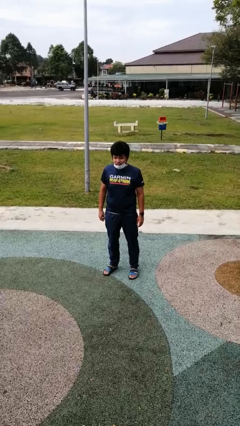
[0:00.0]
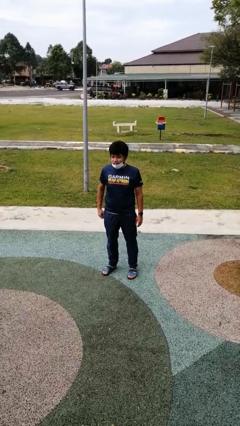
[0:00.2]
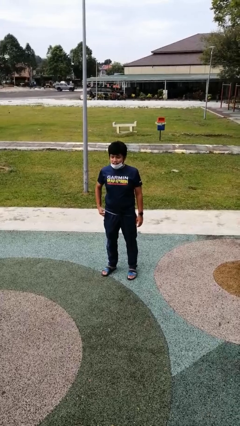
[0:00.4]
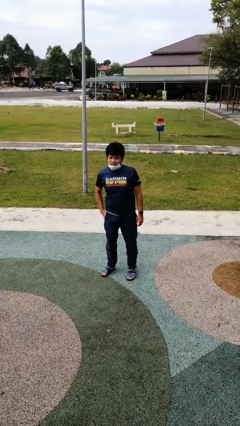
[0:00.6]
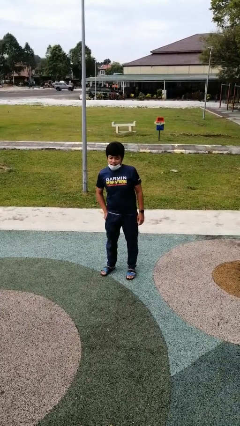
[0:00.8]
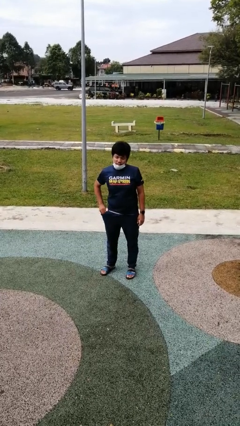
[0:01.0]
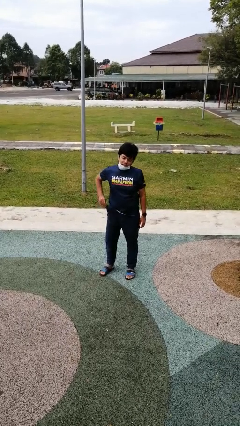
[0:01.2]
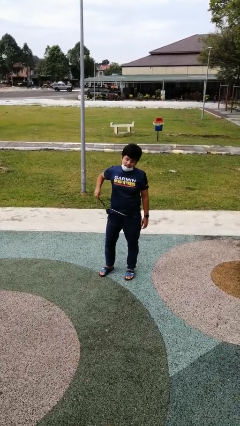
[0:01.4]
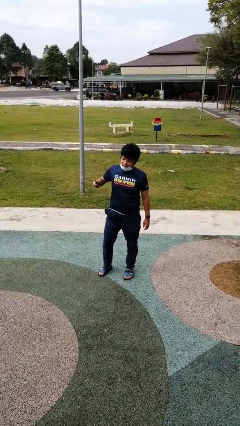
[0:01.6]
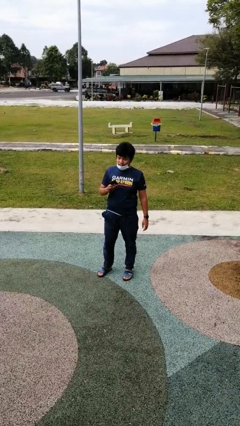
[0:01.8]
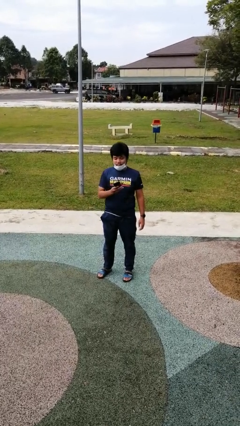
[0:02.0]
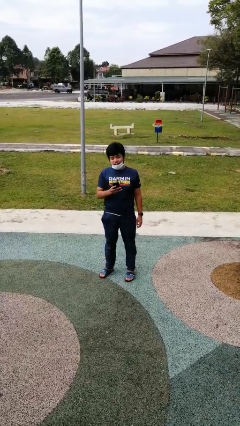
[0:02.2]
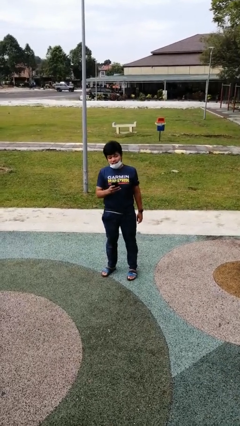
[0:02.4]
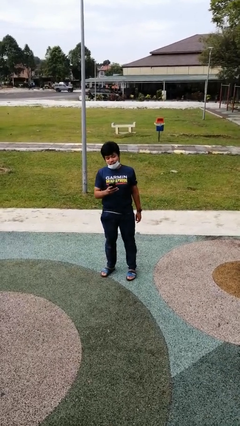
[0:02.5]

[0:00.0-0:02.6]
person takes phone from pocket

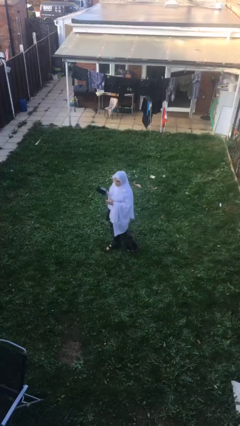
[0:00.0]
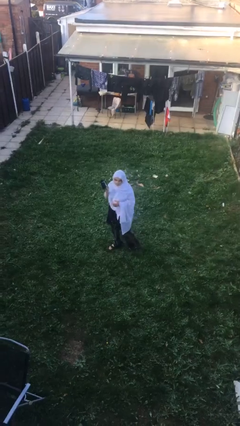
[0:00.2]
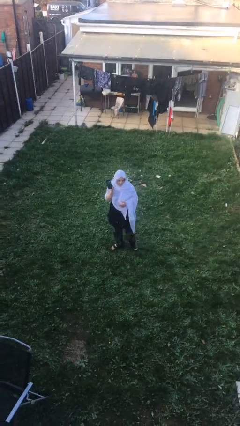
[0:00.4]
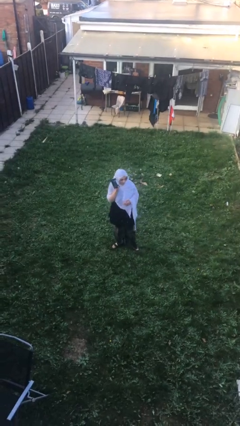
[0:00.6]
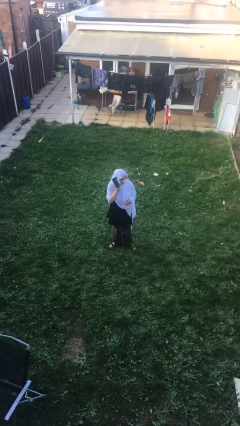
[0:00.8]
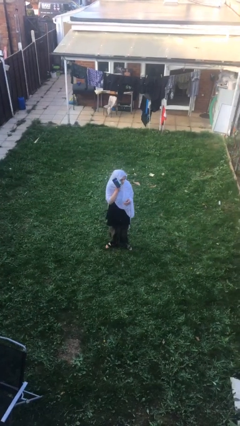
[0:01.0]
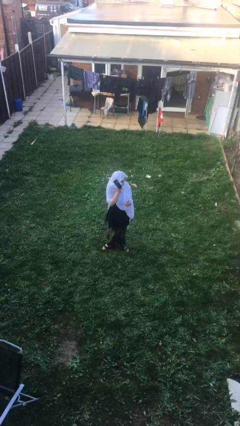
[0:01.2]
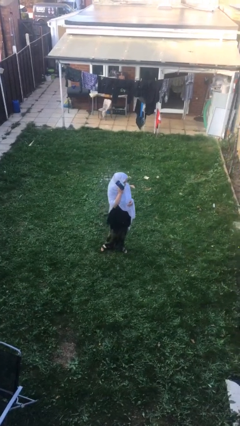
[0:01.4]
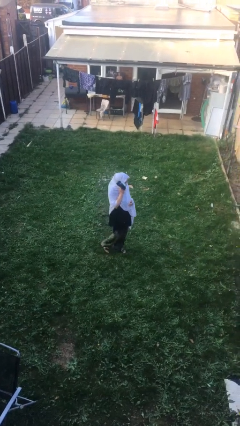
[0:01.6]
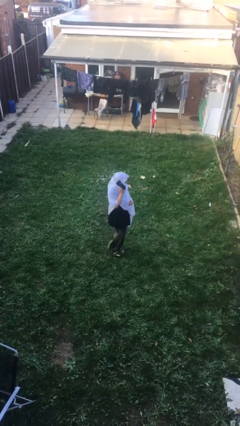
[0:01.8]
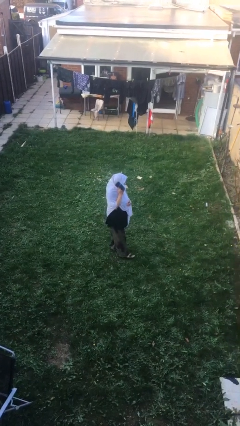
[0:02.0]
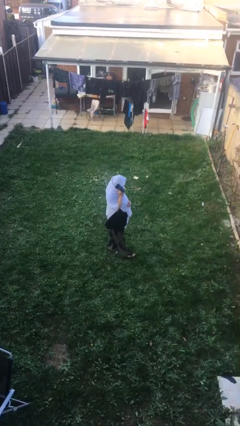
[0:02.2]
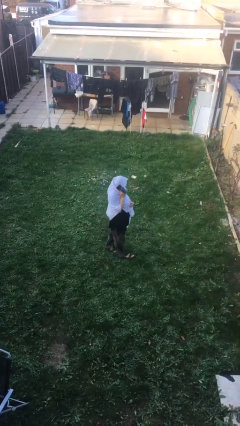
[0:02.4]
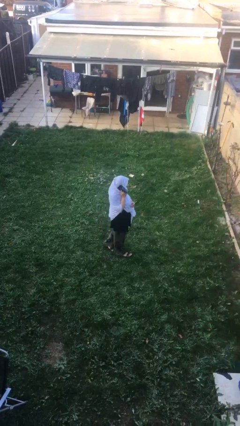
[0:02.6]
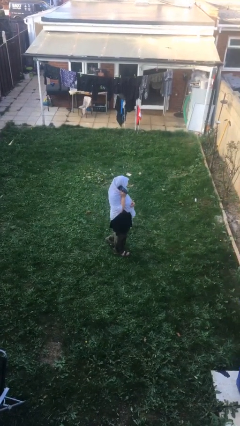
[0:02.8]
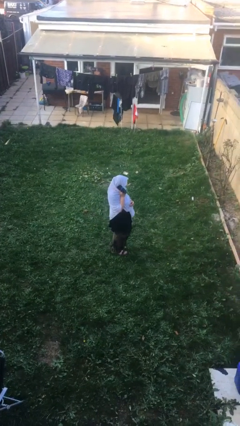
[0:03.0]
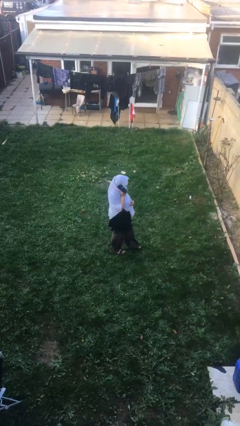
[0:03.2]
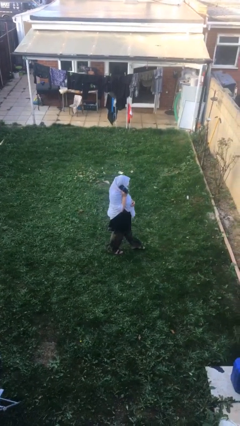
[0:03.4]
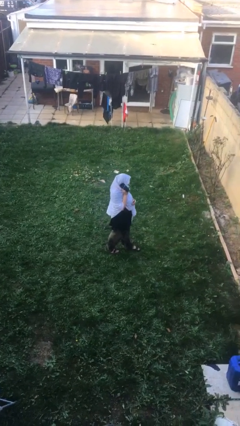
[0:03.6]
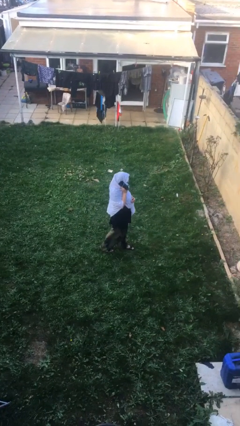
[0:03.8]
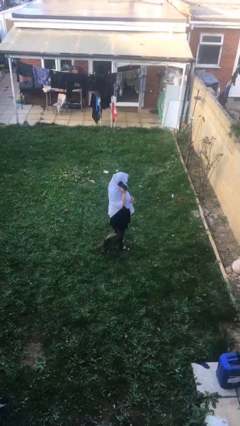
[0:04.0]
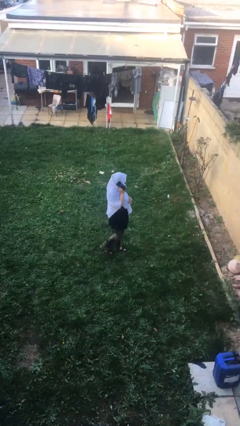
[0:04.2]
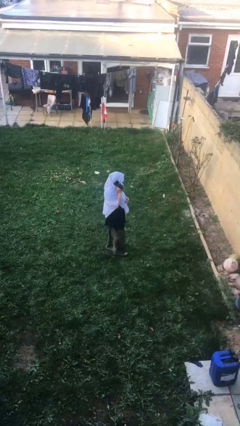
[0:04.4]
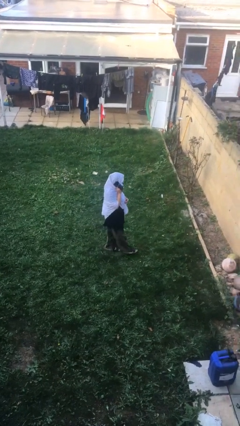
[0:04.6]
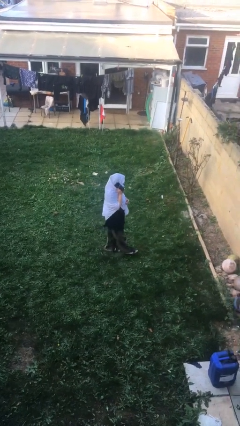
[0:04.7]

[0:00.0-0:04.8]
person talks on phone

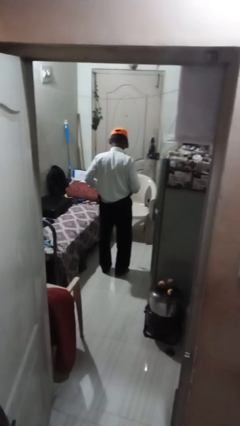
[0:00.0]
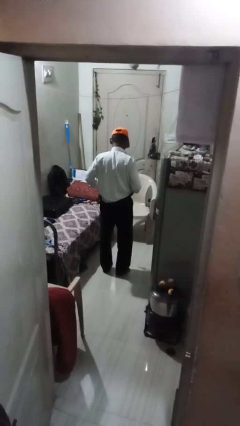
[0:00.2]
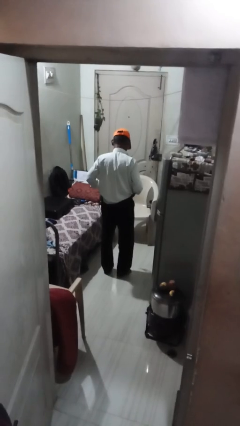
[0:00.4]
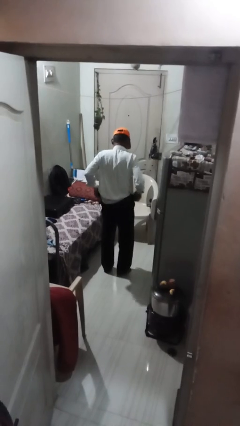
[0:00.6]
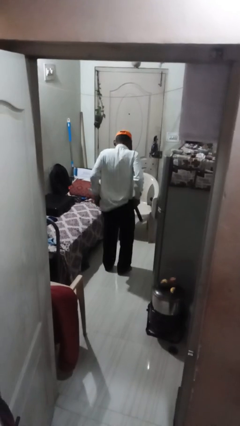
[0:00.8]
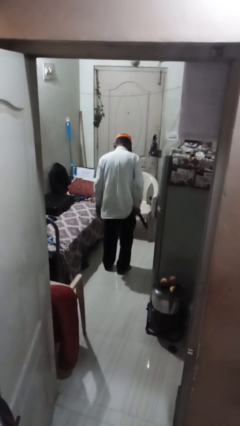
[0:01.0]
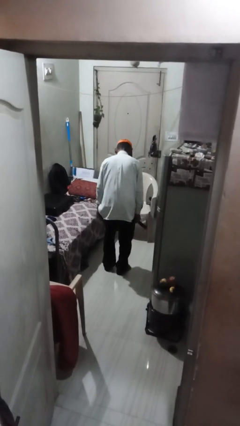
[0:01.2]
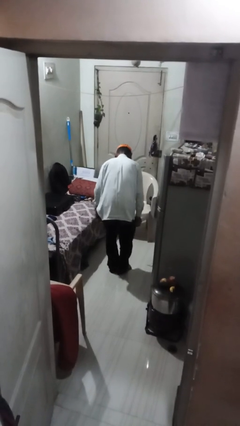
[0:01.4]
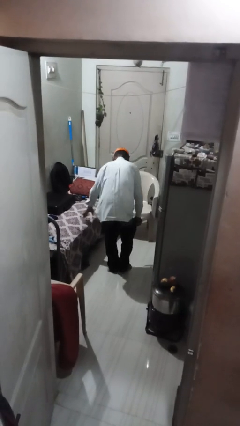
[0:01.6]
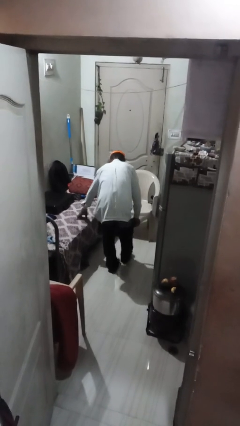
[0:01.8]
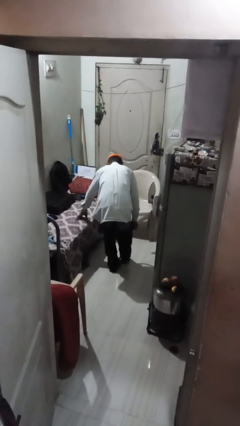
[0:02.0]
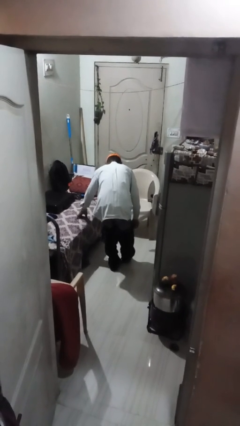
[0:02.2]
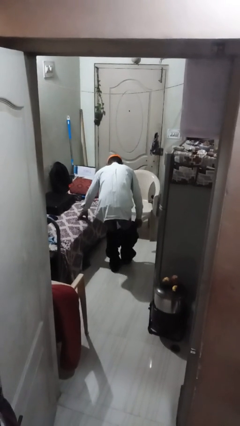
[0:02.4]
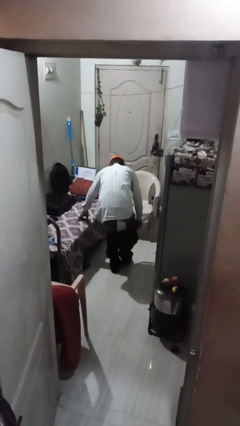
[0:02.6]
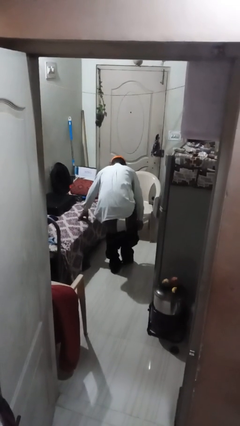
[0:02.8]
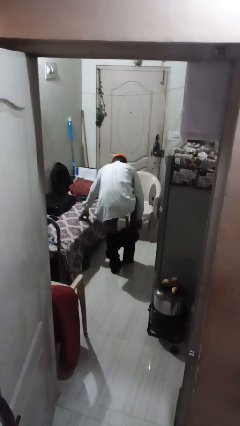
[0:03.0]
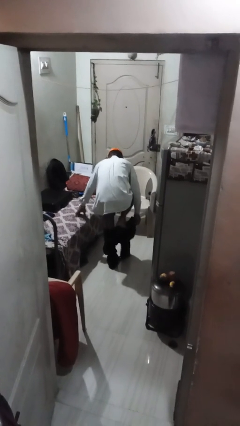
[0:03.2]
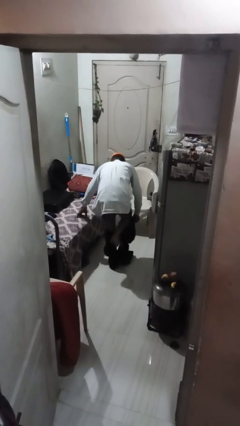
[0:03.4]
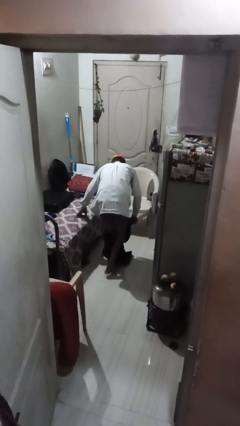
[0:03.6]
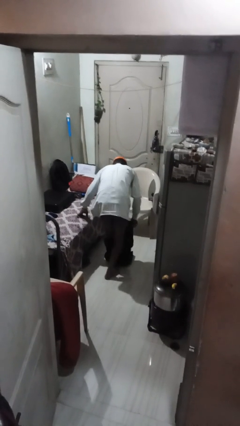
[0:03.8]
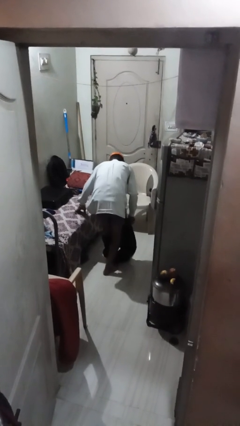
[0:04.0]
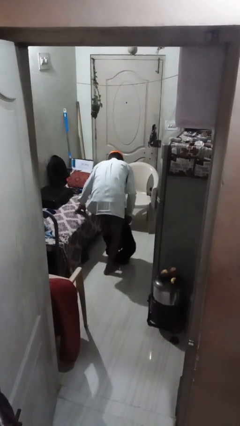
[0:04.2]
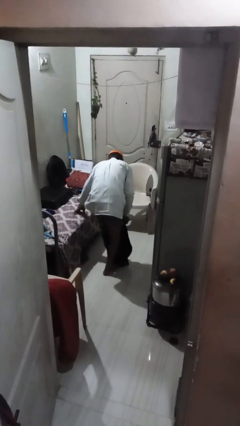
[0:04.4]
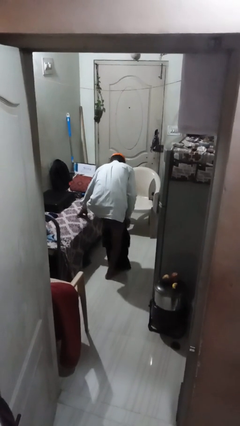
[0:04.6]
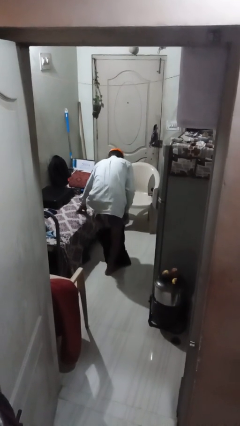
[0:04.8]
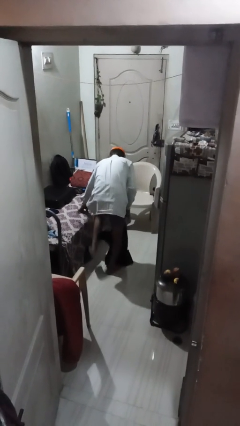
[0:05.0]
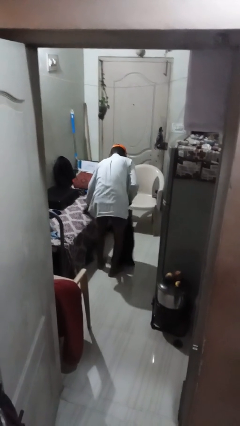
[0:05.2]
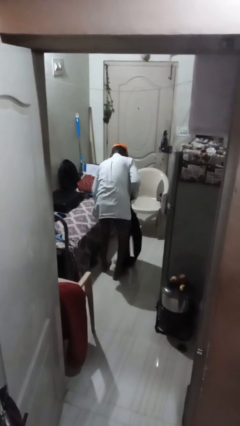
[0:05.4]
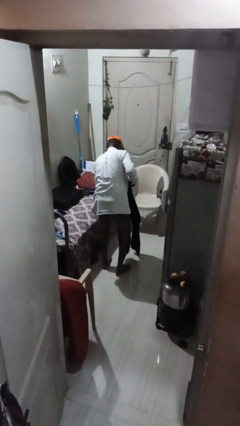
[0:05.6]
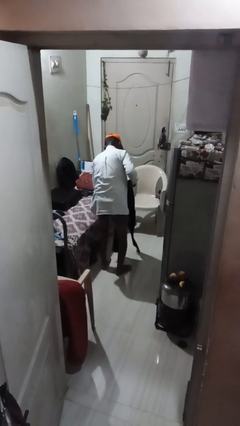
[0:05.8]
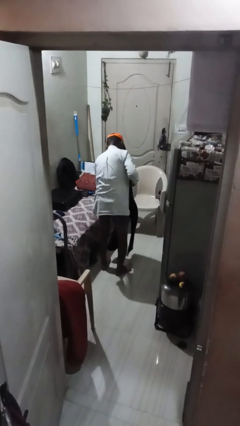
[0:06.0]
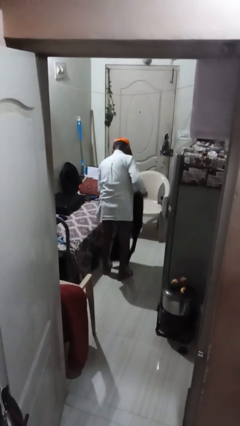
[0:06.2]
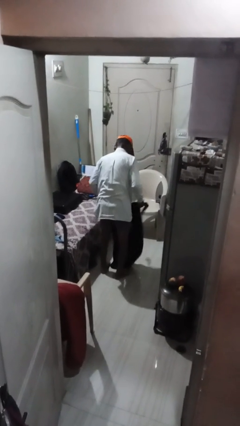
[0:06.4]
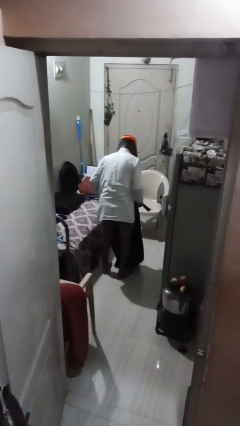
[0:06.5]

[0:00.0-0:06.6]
person takes off pants

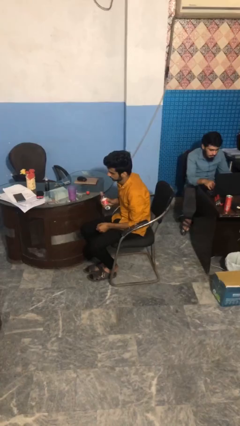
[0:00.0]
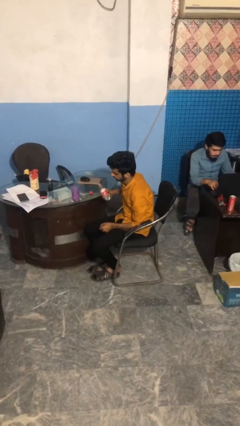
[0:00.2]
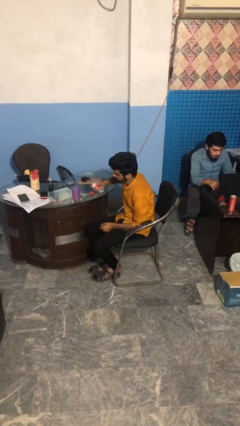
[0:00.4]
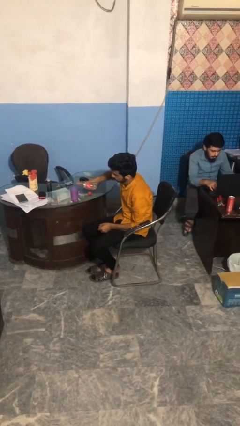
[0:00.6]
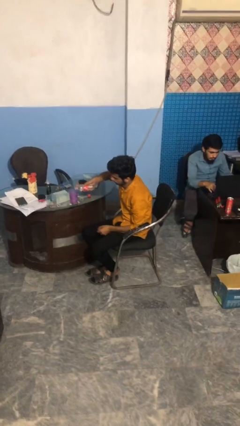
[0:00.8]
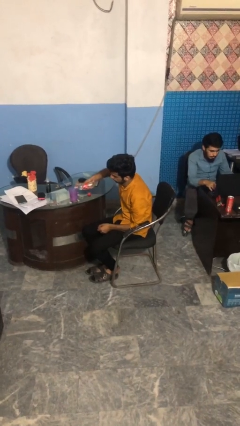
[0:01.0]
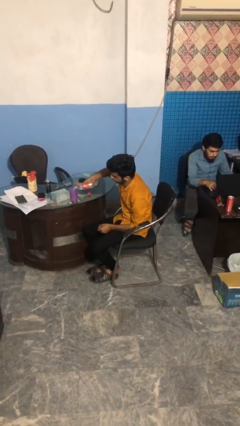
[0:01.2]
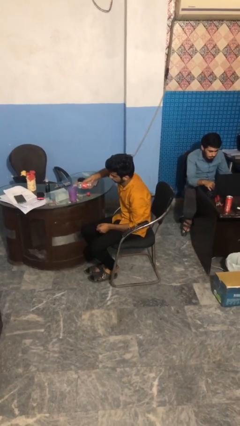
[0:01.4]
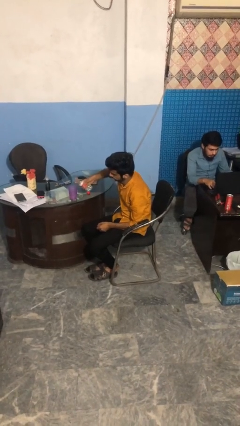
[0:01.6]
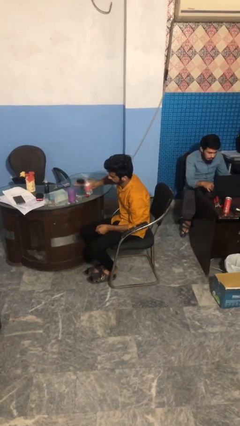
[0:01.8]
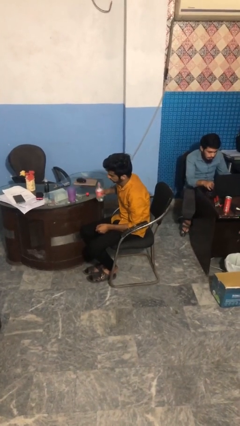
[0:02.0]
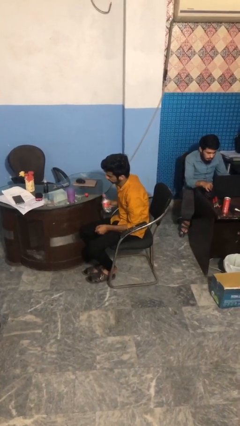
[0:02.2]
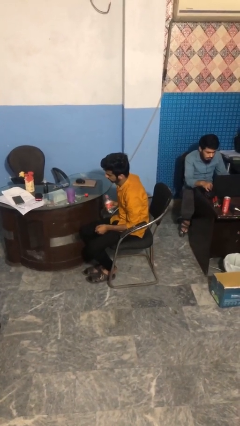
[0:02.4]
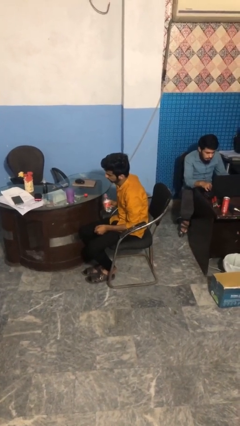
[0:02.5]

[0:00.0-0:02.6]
person pours liquid into cup

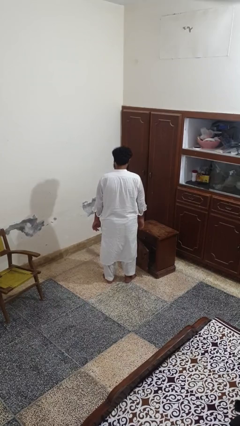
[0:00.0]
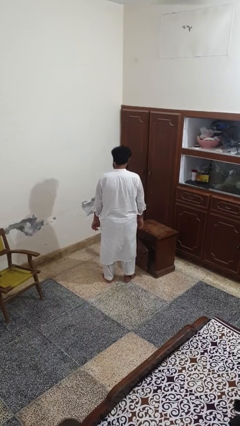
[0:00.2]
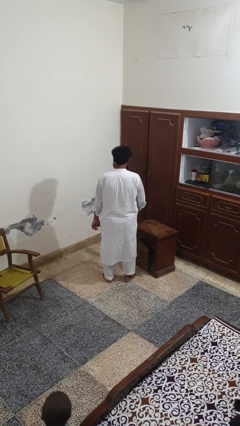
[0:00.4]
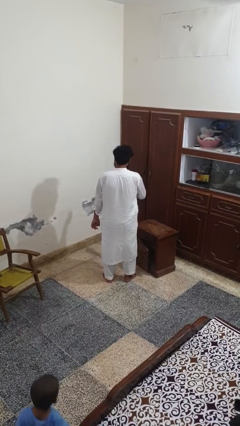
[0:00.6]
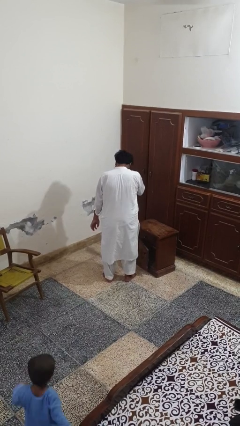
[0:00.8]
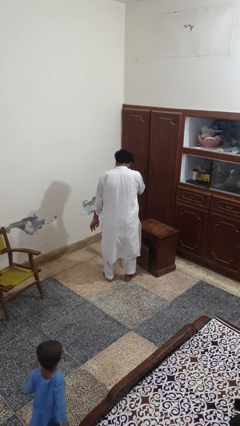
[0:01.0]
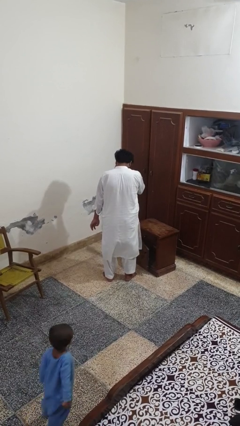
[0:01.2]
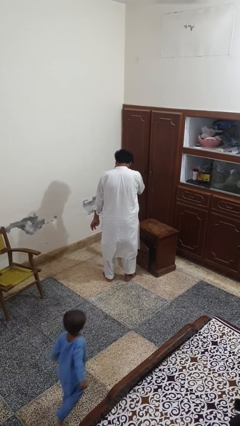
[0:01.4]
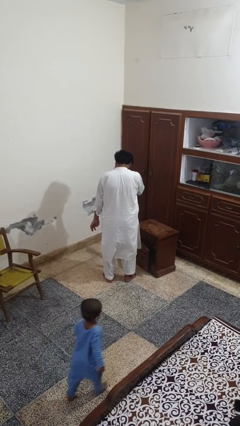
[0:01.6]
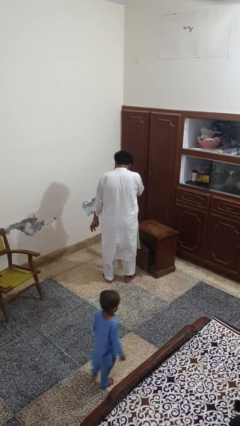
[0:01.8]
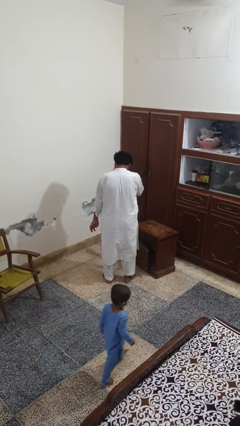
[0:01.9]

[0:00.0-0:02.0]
person sneezes into hand
